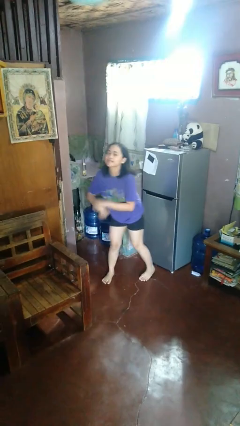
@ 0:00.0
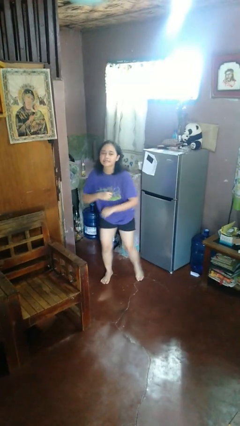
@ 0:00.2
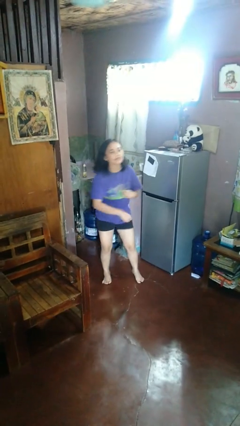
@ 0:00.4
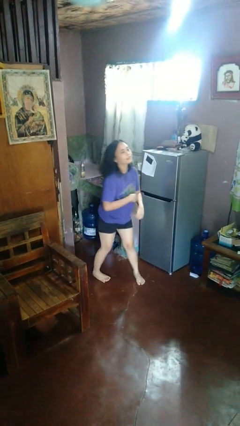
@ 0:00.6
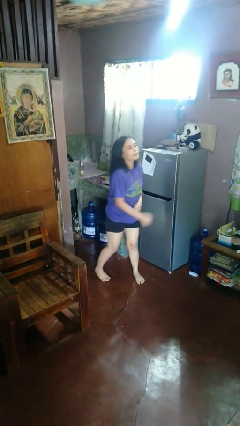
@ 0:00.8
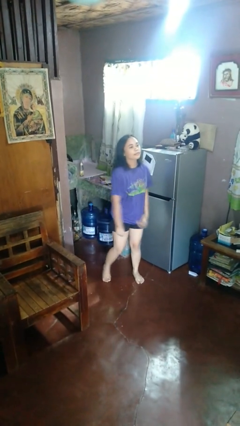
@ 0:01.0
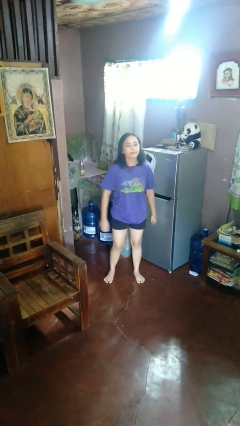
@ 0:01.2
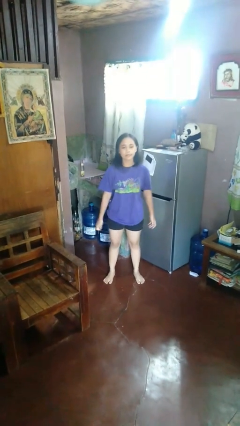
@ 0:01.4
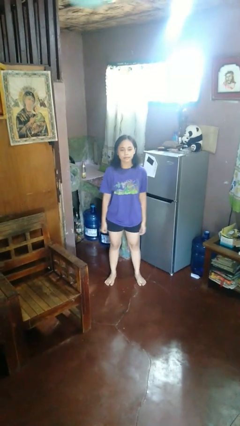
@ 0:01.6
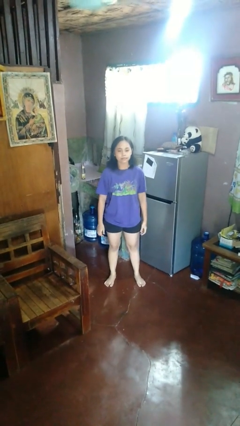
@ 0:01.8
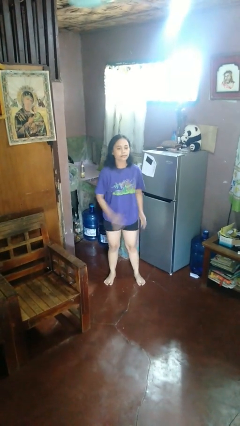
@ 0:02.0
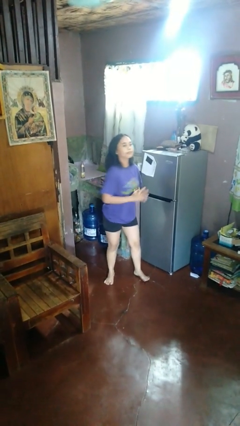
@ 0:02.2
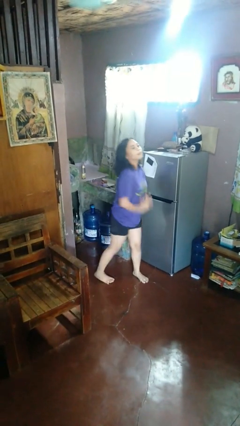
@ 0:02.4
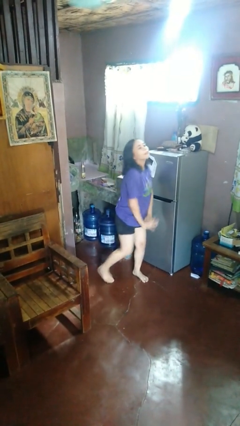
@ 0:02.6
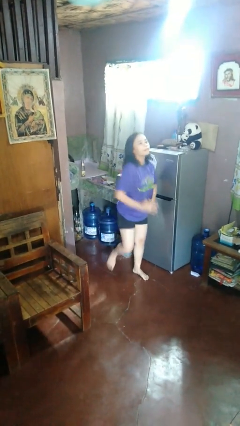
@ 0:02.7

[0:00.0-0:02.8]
person dances in place

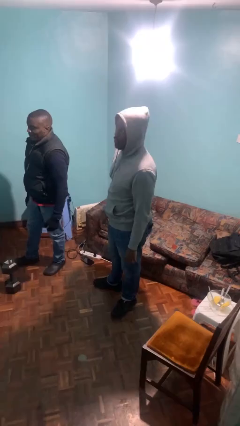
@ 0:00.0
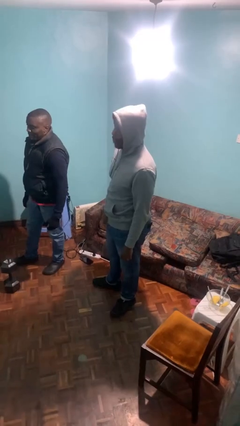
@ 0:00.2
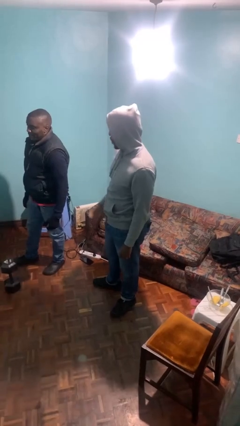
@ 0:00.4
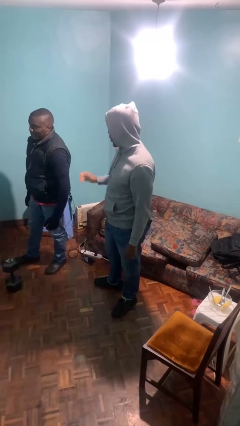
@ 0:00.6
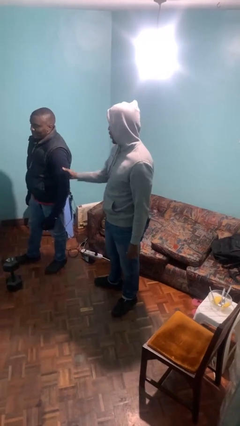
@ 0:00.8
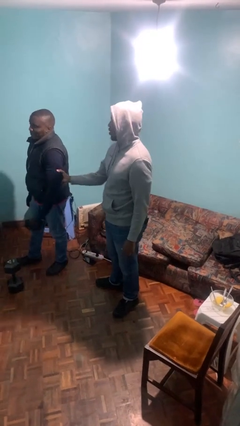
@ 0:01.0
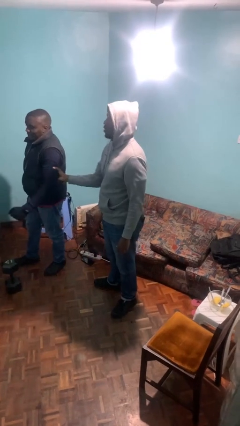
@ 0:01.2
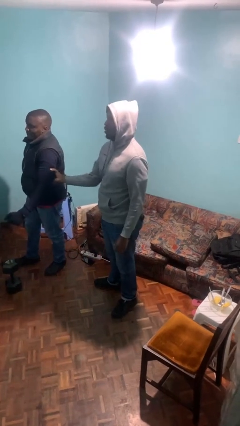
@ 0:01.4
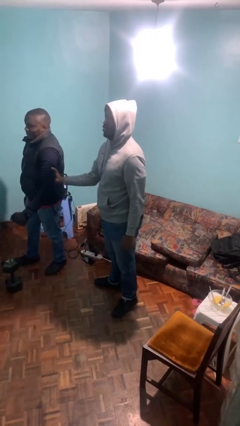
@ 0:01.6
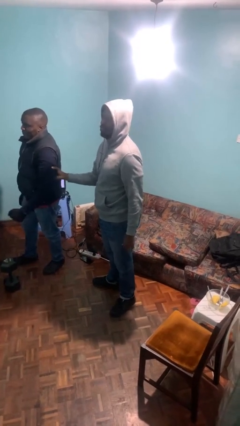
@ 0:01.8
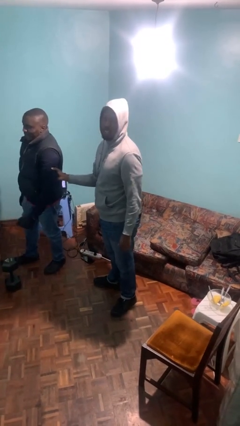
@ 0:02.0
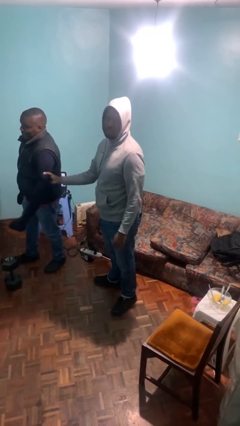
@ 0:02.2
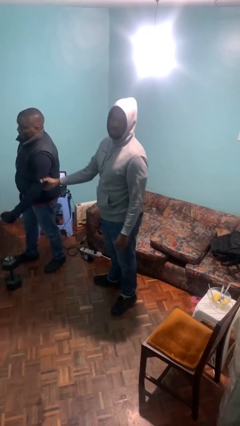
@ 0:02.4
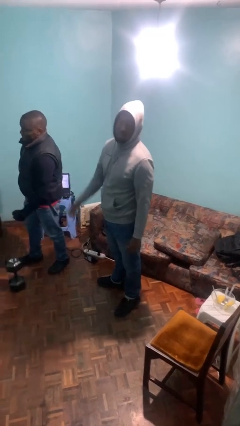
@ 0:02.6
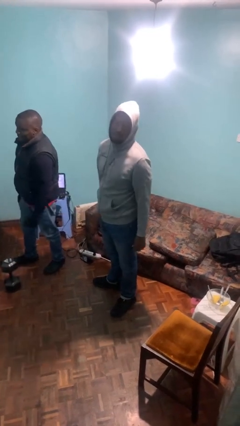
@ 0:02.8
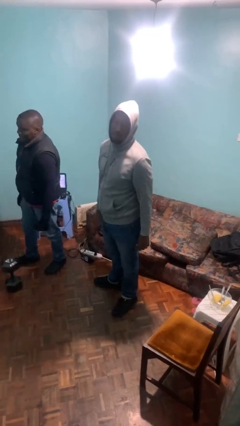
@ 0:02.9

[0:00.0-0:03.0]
person grabs person by bicep

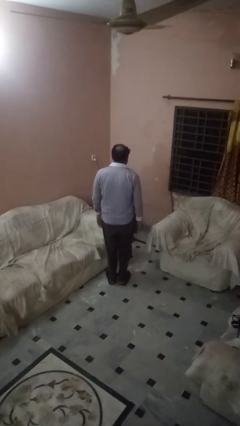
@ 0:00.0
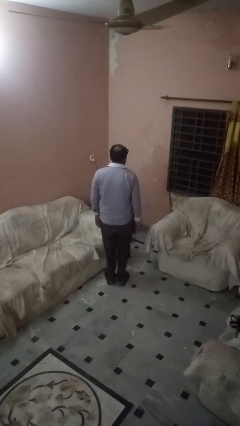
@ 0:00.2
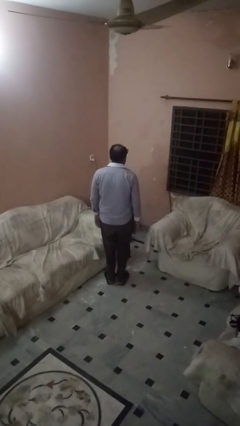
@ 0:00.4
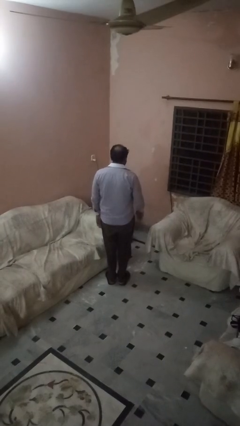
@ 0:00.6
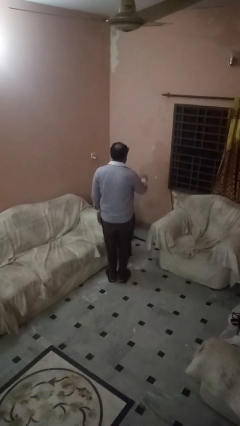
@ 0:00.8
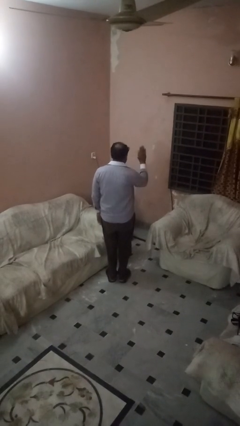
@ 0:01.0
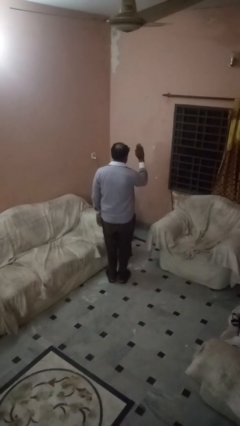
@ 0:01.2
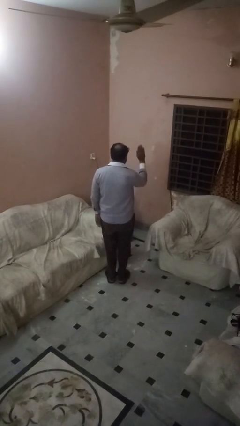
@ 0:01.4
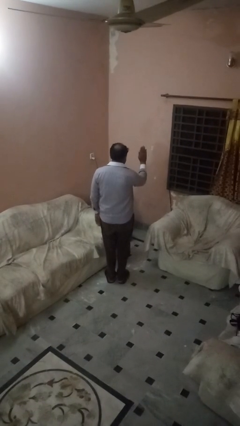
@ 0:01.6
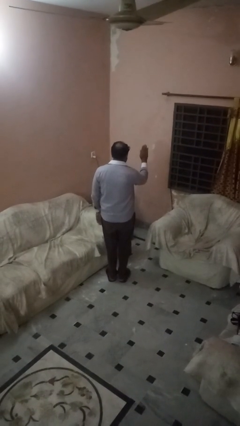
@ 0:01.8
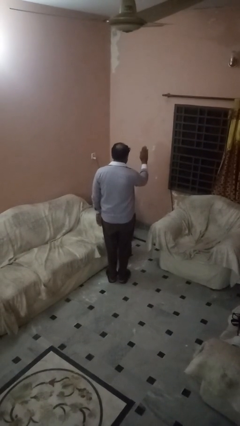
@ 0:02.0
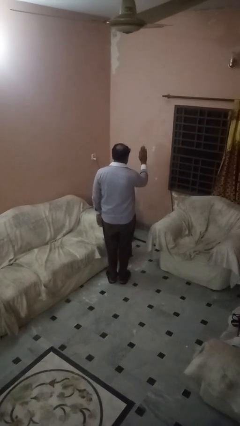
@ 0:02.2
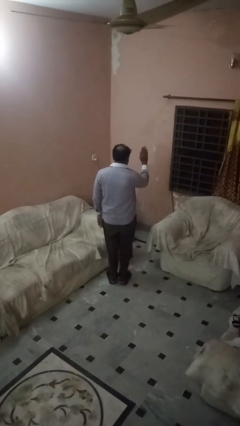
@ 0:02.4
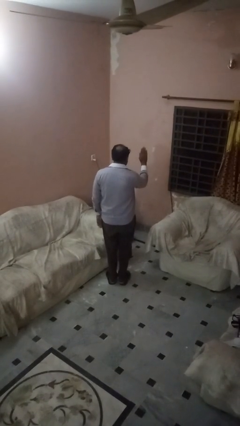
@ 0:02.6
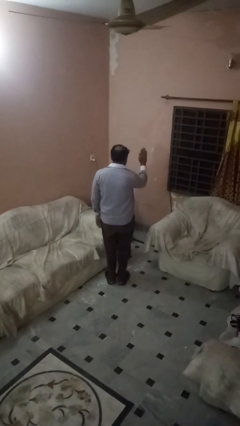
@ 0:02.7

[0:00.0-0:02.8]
person gestures stop

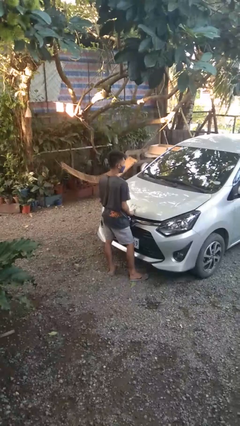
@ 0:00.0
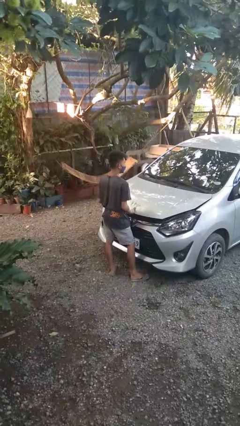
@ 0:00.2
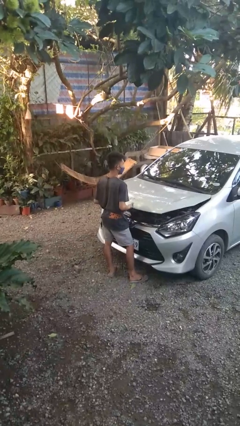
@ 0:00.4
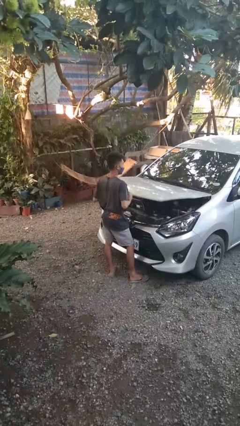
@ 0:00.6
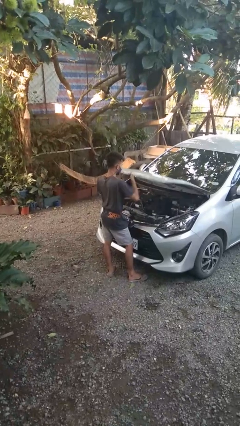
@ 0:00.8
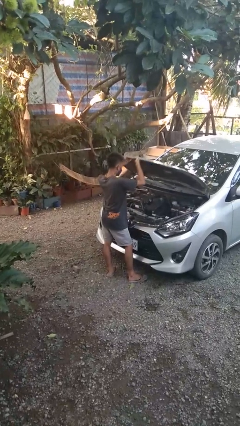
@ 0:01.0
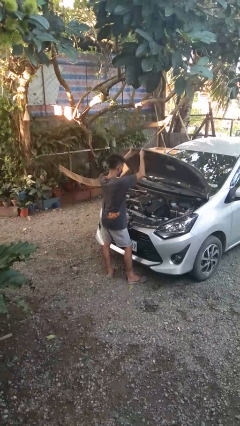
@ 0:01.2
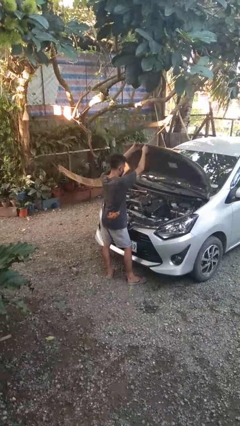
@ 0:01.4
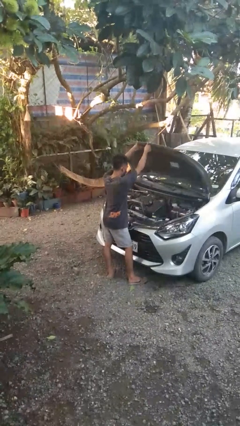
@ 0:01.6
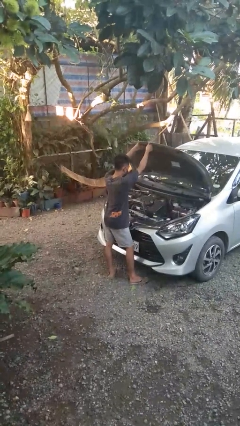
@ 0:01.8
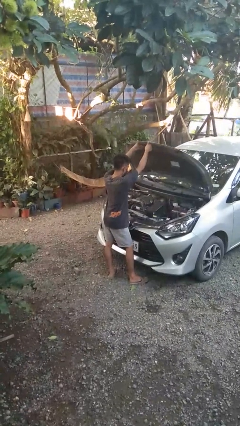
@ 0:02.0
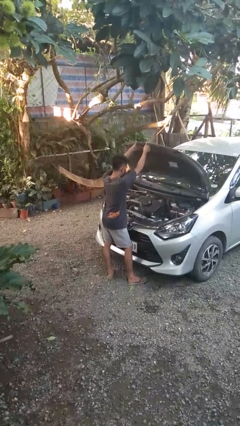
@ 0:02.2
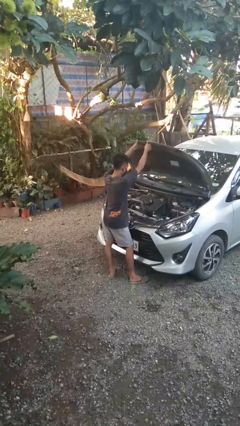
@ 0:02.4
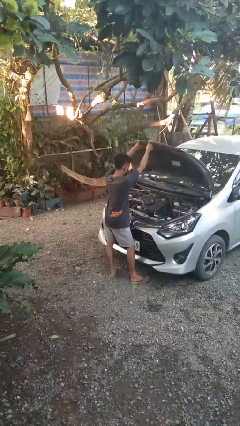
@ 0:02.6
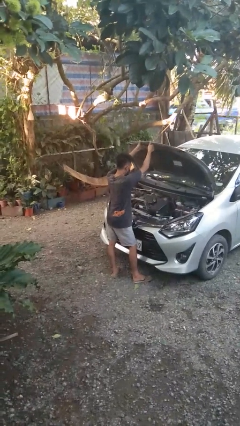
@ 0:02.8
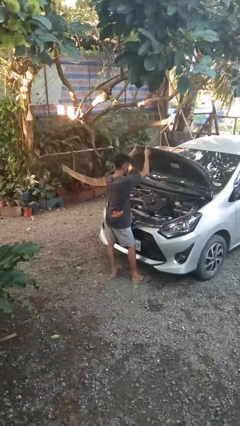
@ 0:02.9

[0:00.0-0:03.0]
person opens car hood

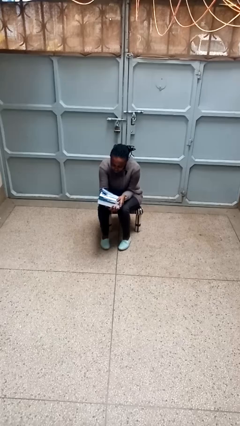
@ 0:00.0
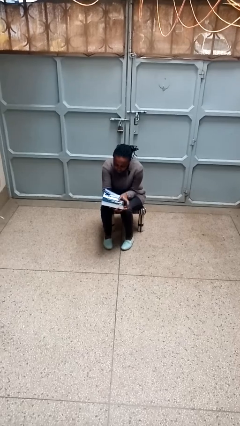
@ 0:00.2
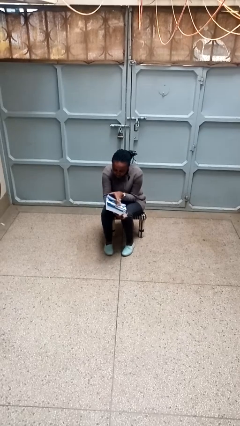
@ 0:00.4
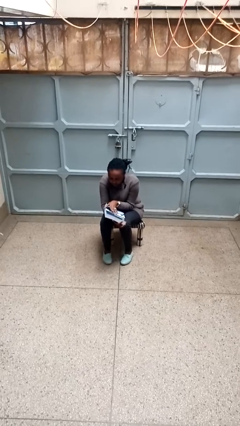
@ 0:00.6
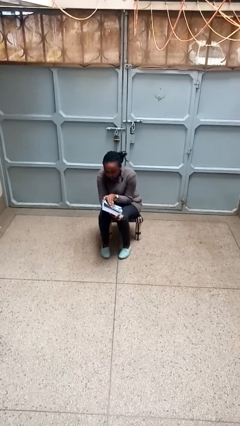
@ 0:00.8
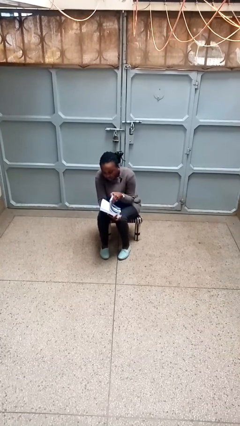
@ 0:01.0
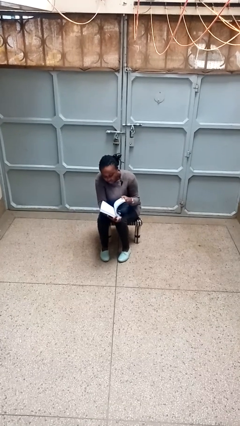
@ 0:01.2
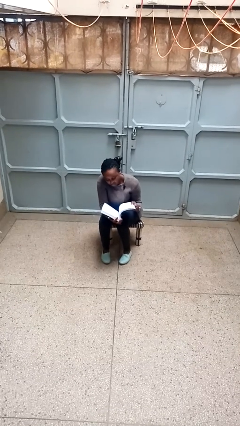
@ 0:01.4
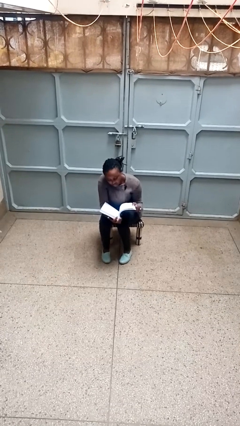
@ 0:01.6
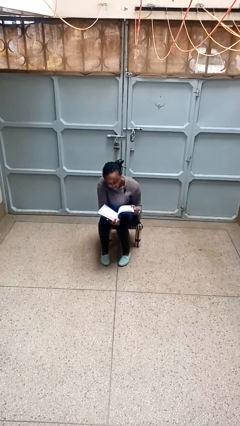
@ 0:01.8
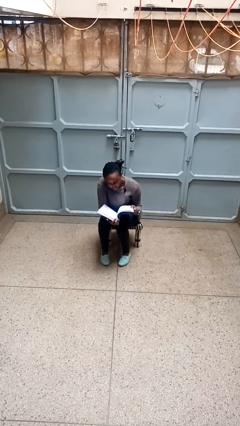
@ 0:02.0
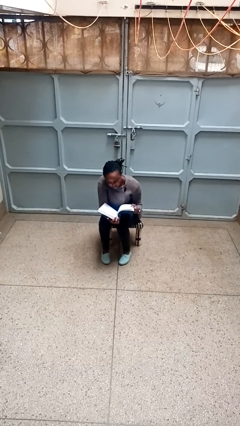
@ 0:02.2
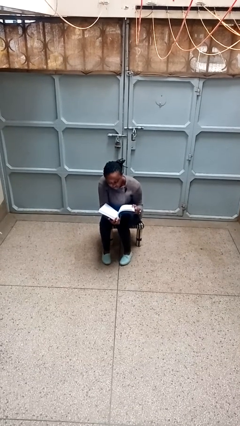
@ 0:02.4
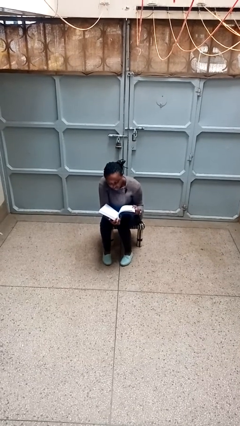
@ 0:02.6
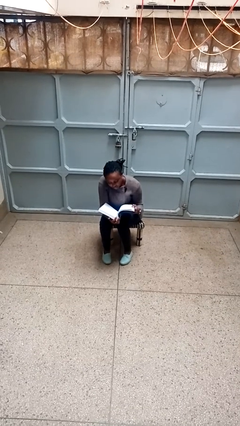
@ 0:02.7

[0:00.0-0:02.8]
person reads book

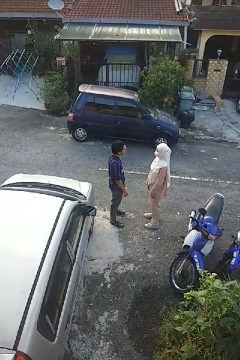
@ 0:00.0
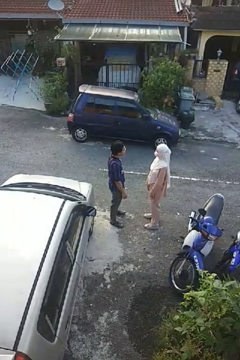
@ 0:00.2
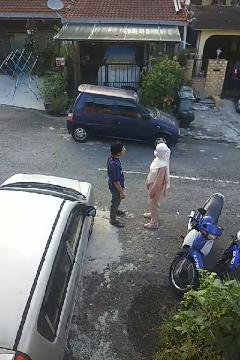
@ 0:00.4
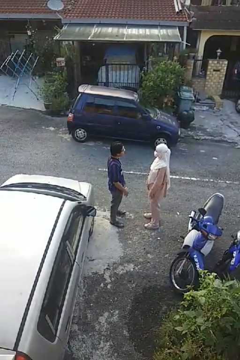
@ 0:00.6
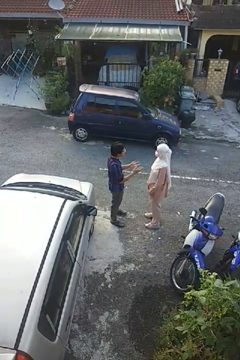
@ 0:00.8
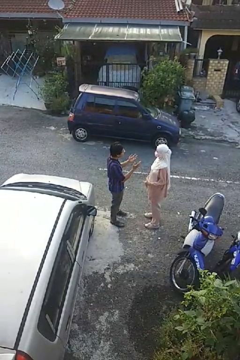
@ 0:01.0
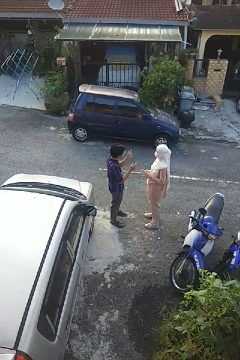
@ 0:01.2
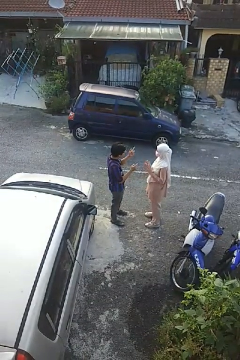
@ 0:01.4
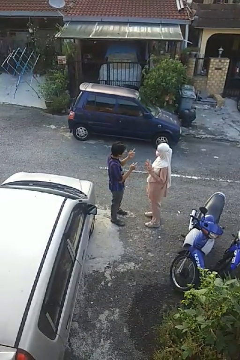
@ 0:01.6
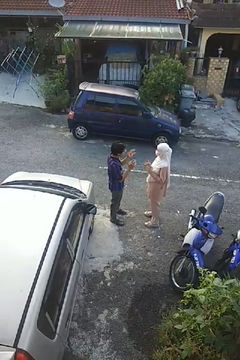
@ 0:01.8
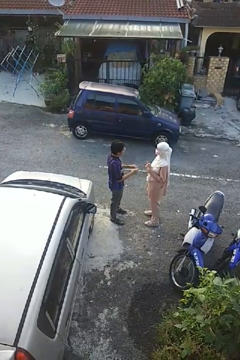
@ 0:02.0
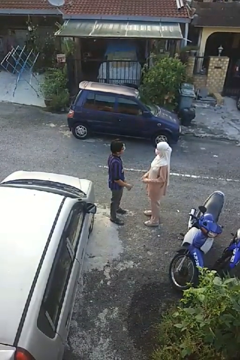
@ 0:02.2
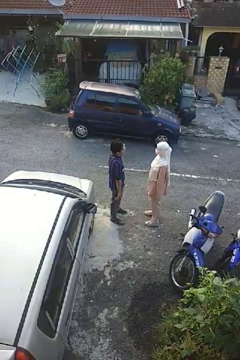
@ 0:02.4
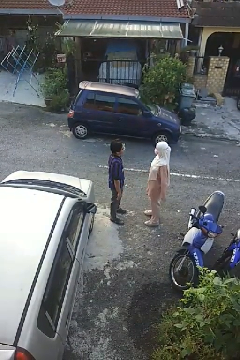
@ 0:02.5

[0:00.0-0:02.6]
person talks to person

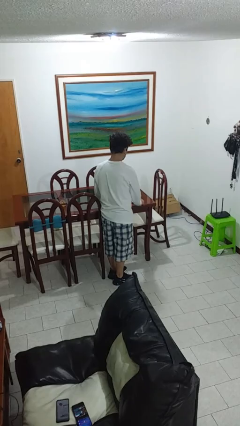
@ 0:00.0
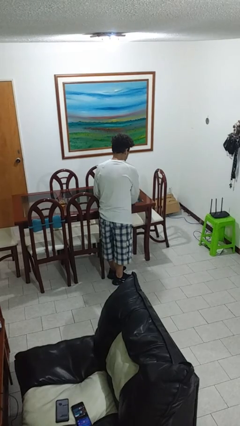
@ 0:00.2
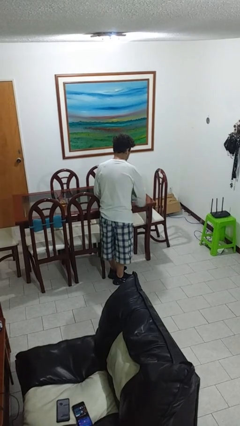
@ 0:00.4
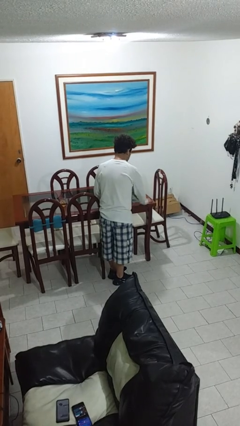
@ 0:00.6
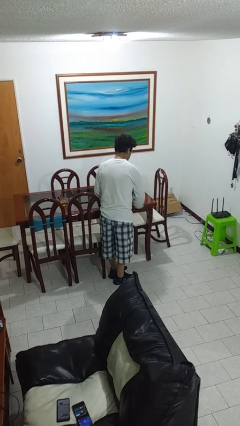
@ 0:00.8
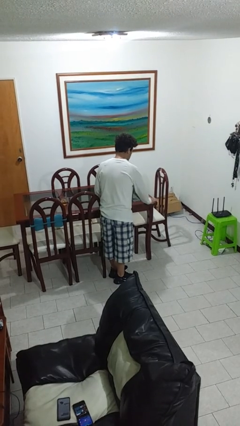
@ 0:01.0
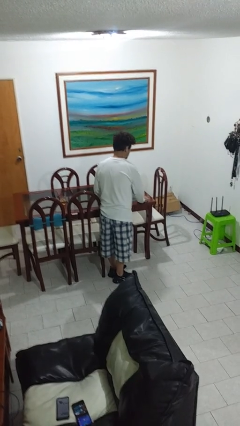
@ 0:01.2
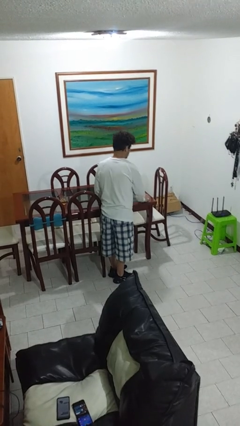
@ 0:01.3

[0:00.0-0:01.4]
person cleans table with rag
